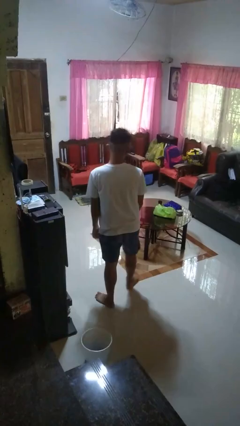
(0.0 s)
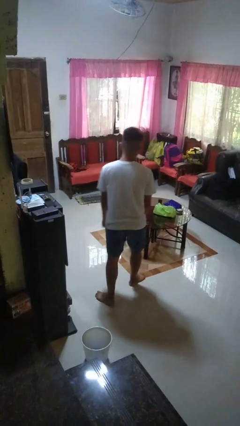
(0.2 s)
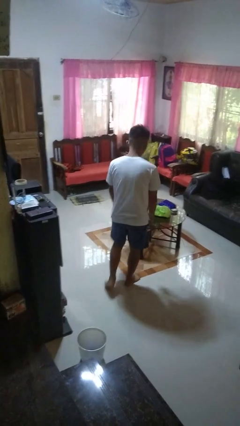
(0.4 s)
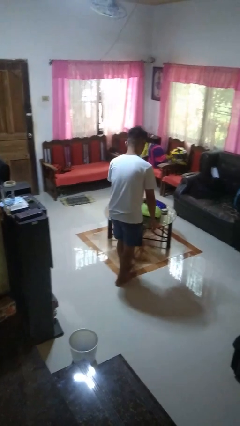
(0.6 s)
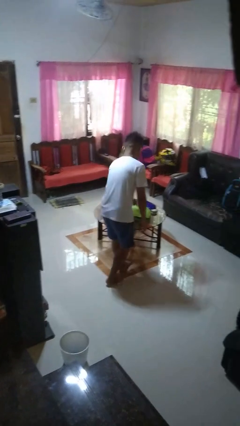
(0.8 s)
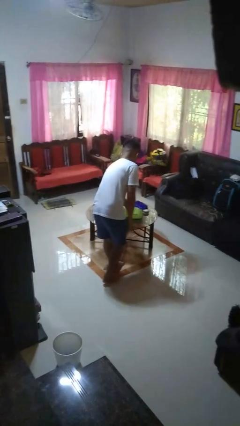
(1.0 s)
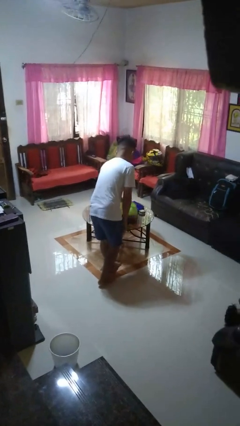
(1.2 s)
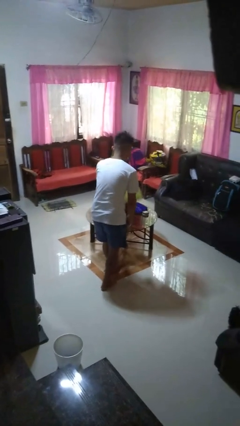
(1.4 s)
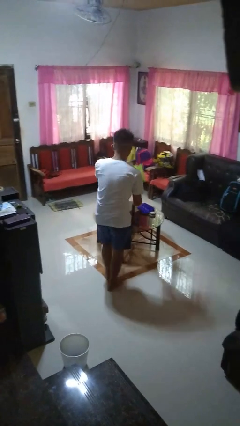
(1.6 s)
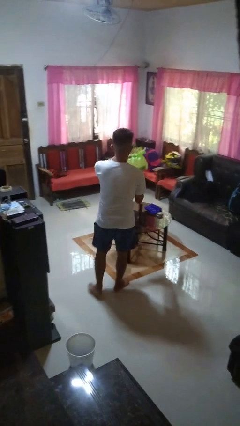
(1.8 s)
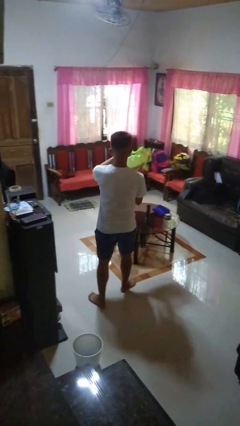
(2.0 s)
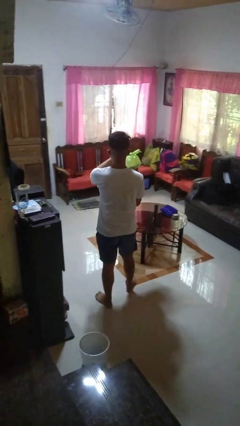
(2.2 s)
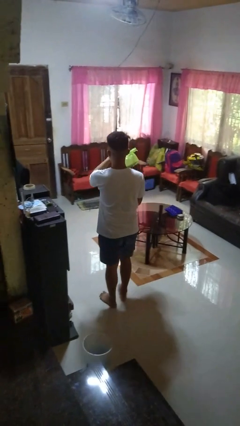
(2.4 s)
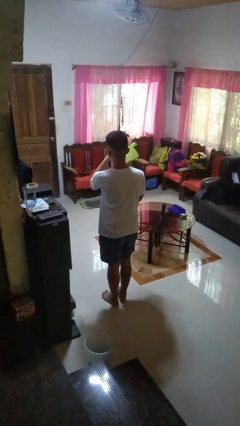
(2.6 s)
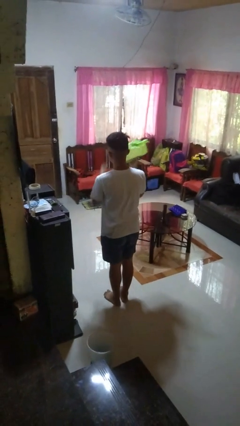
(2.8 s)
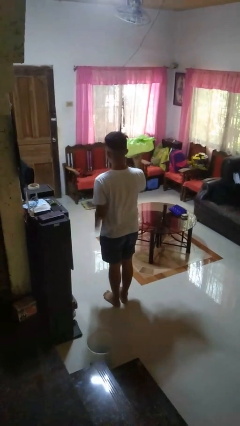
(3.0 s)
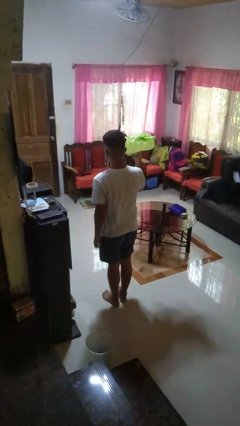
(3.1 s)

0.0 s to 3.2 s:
person picks up object from table

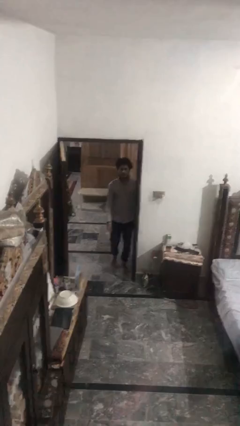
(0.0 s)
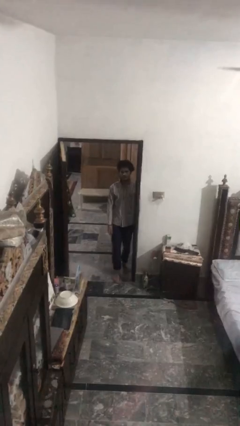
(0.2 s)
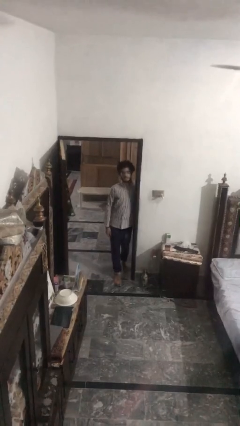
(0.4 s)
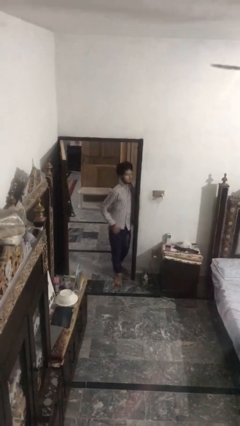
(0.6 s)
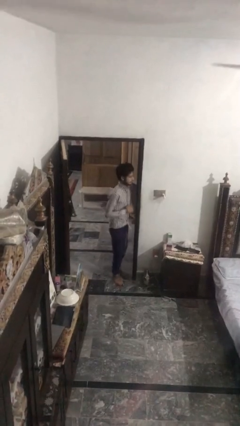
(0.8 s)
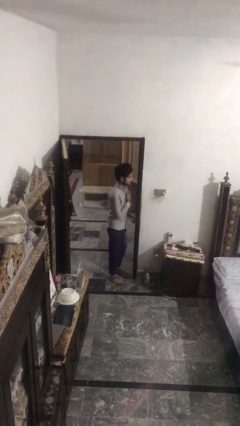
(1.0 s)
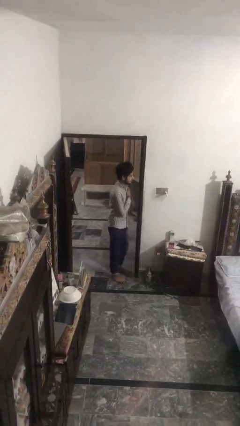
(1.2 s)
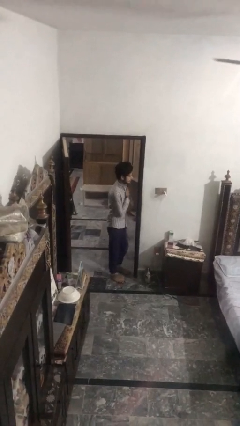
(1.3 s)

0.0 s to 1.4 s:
person bumps into wall

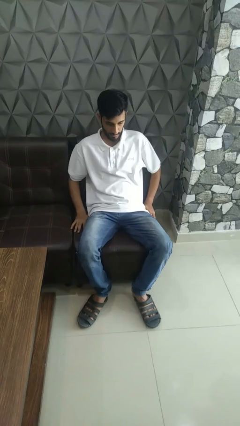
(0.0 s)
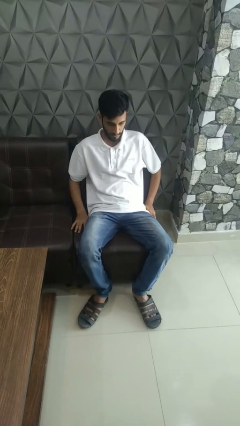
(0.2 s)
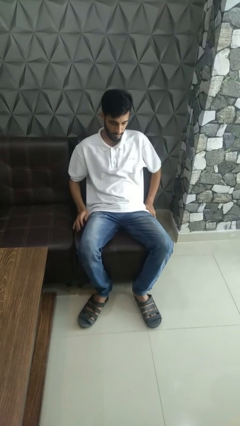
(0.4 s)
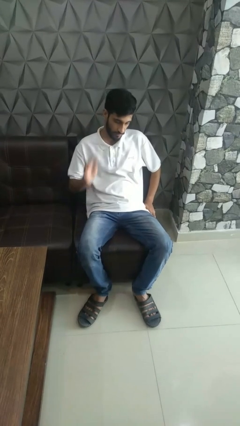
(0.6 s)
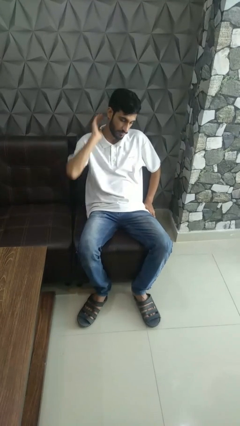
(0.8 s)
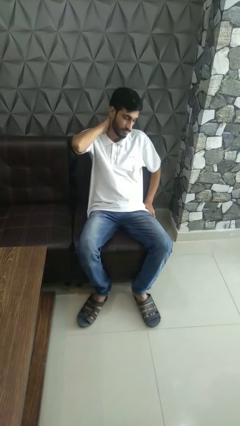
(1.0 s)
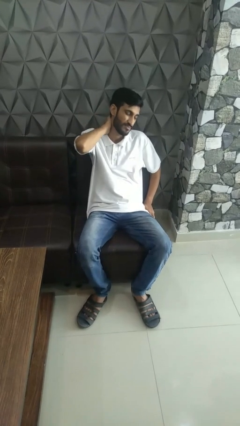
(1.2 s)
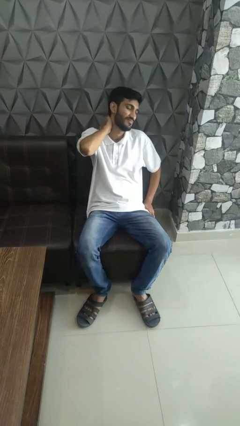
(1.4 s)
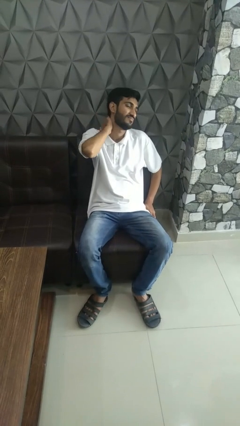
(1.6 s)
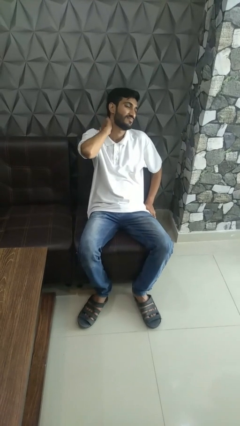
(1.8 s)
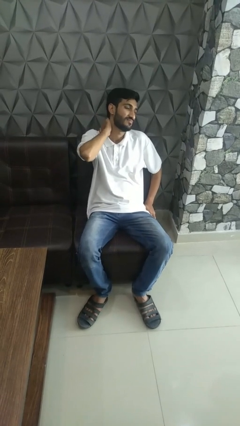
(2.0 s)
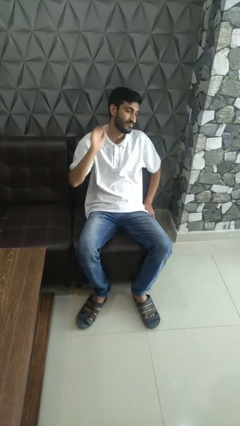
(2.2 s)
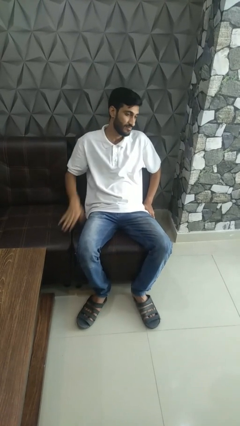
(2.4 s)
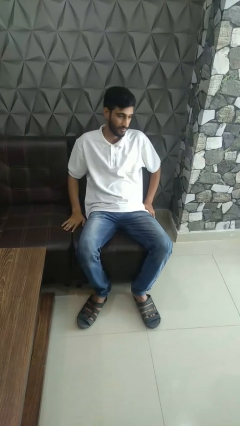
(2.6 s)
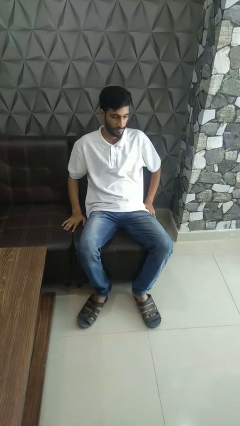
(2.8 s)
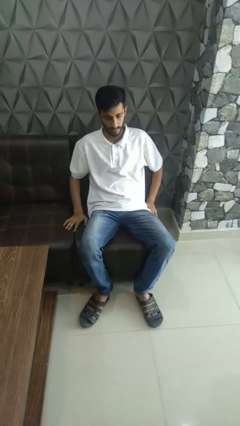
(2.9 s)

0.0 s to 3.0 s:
person rubs neck

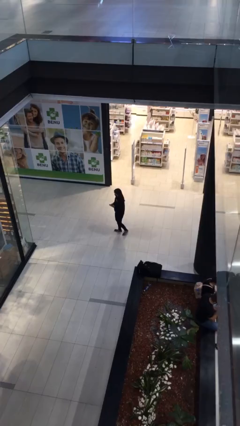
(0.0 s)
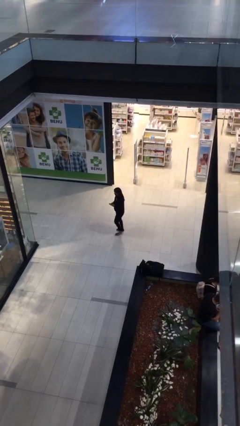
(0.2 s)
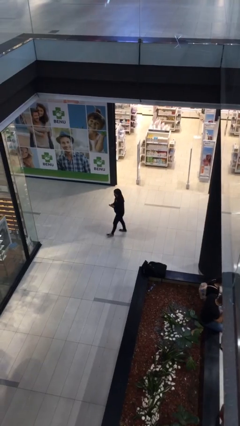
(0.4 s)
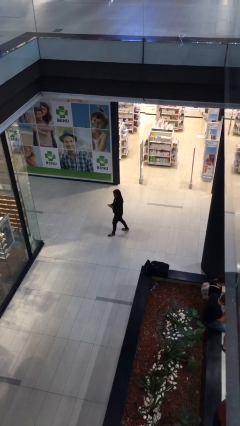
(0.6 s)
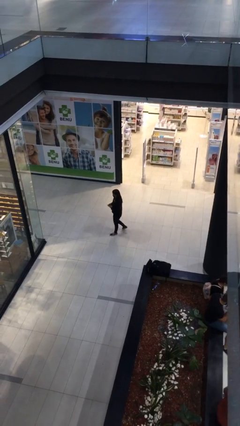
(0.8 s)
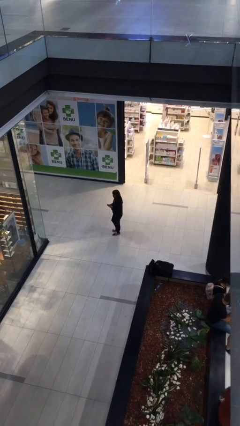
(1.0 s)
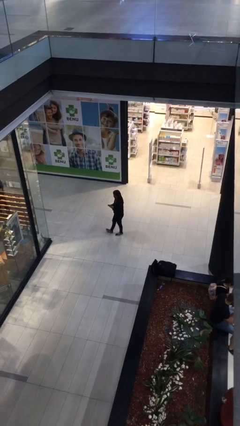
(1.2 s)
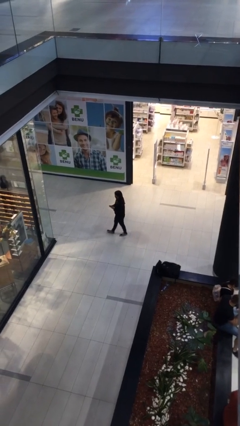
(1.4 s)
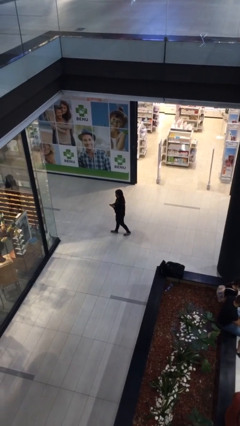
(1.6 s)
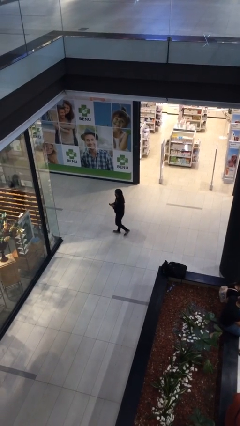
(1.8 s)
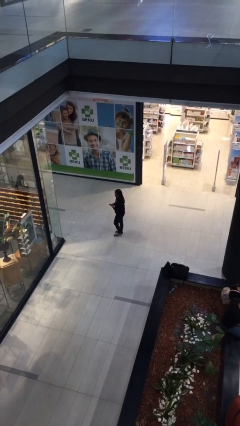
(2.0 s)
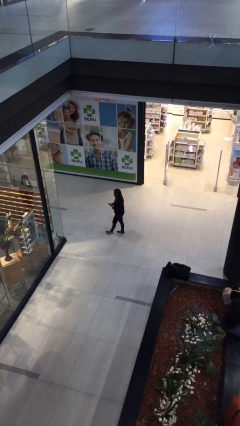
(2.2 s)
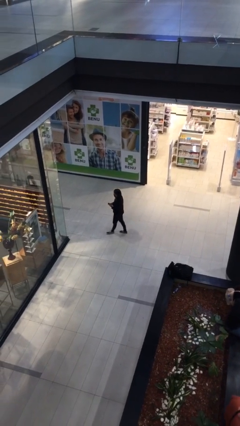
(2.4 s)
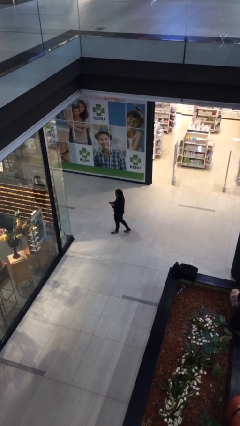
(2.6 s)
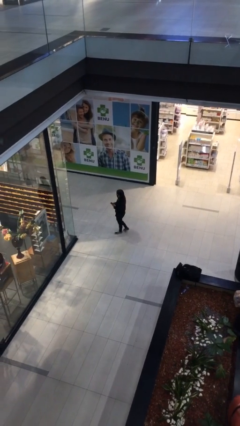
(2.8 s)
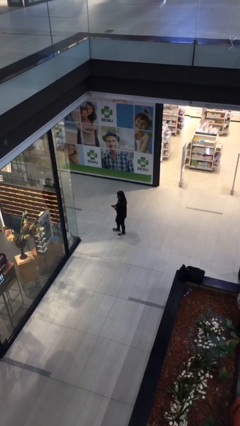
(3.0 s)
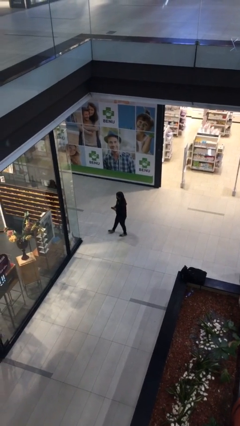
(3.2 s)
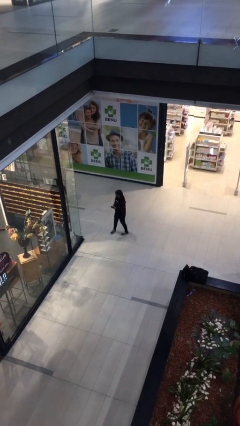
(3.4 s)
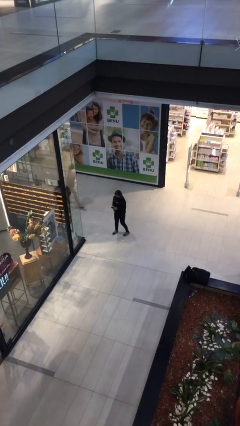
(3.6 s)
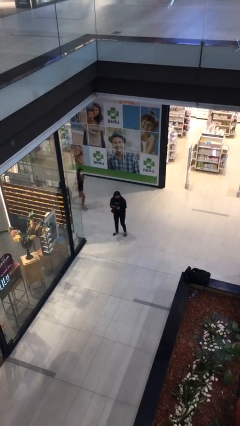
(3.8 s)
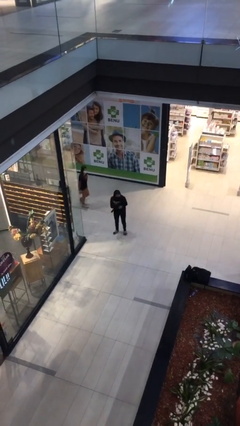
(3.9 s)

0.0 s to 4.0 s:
person texts on phone

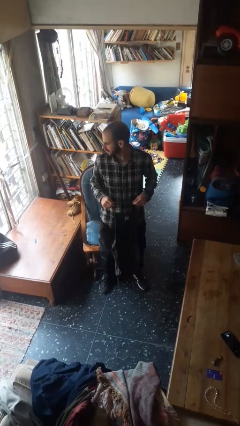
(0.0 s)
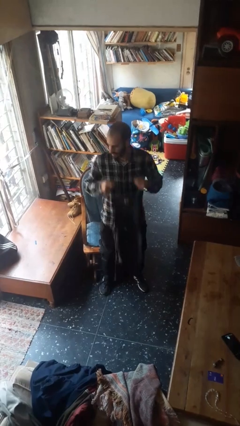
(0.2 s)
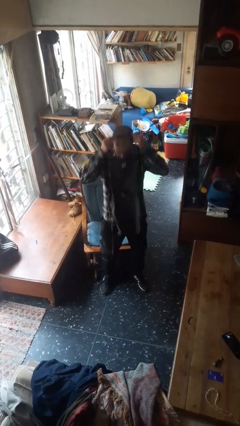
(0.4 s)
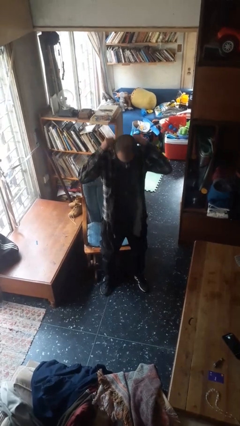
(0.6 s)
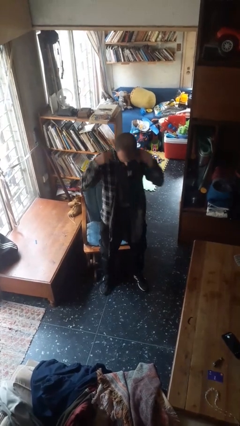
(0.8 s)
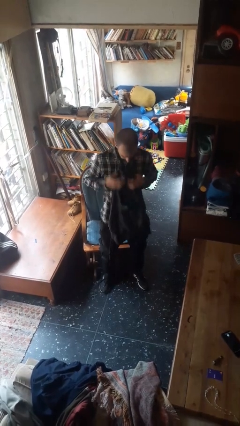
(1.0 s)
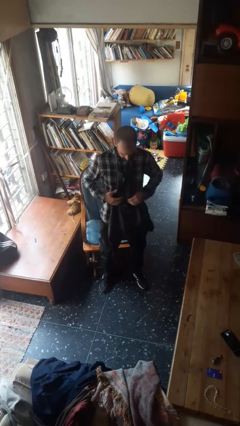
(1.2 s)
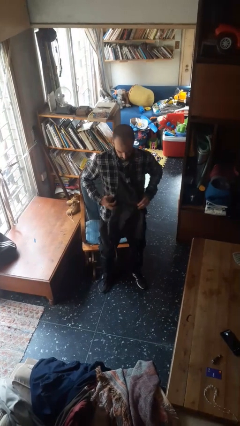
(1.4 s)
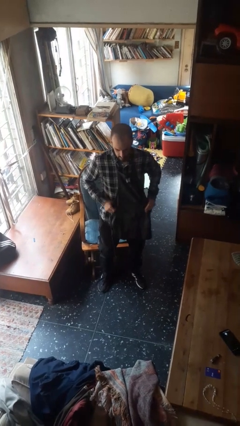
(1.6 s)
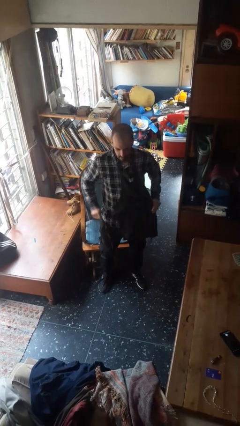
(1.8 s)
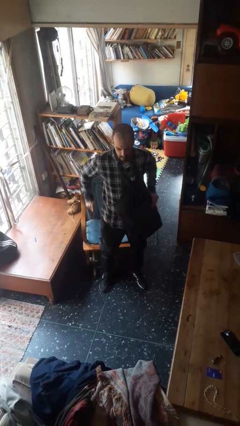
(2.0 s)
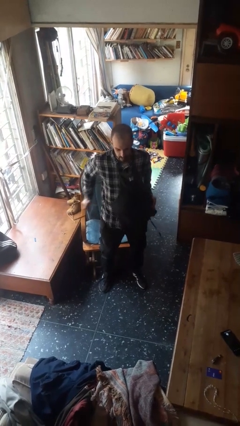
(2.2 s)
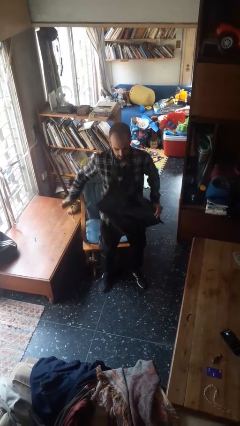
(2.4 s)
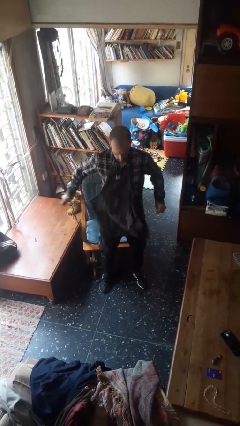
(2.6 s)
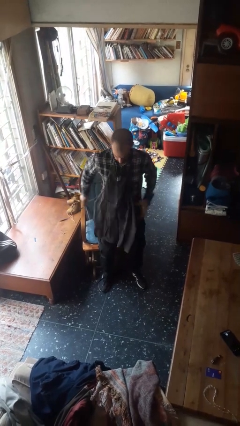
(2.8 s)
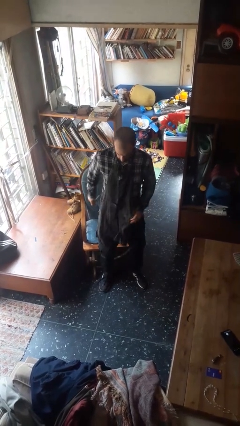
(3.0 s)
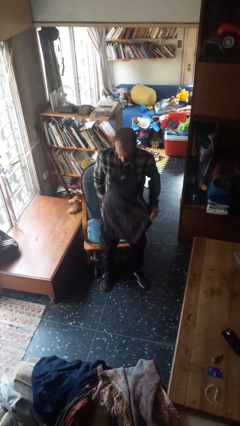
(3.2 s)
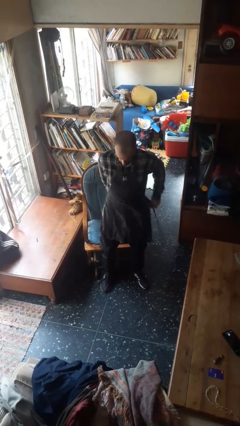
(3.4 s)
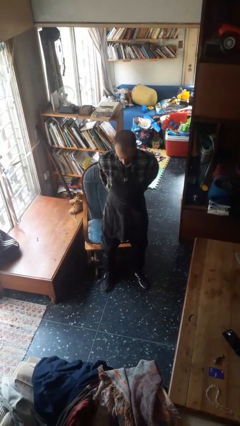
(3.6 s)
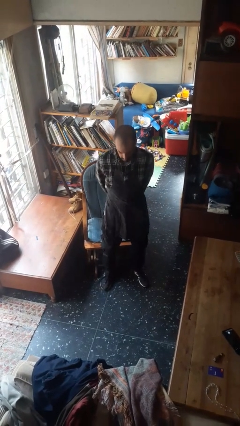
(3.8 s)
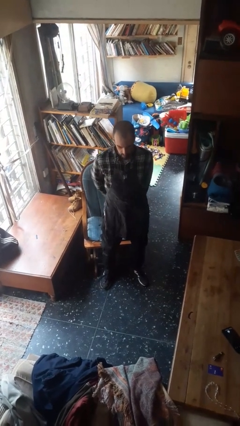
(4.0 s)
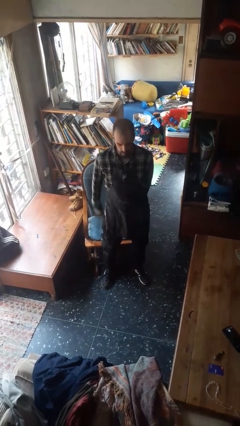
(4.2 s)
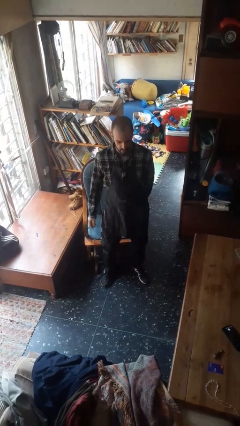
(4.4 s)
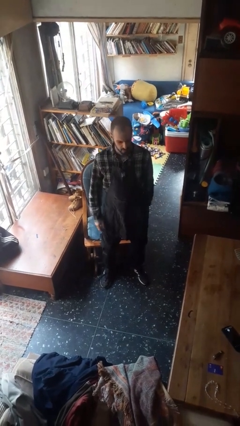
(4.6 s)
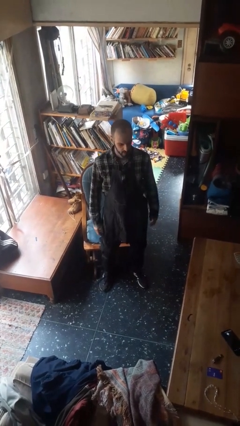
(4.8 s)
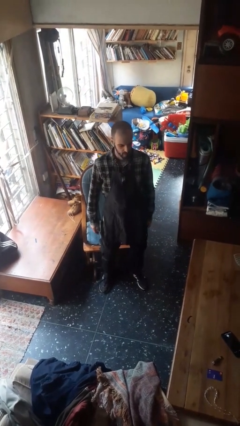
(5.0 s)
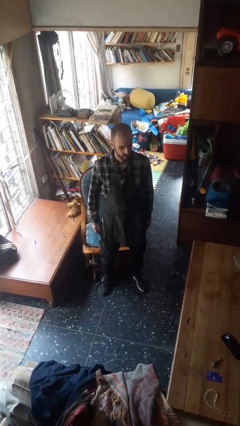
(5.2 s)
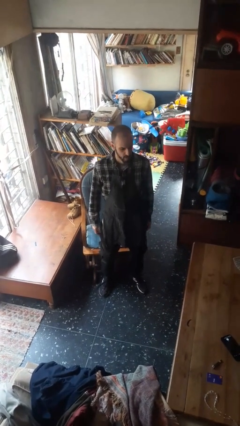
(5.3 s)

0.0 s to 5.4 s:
person puts on apron
